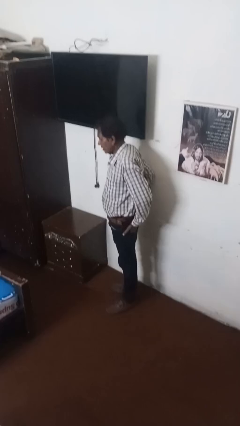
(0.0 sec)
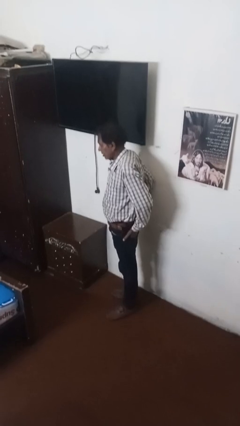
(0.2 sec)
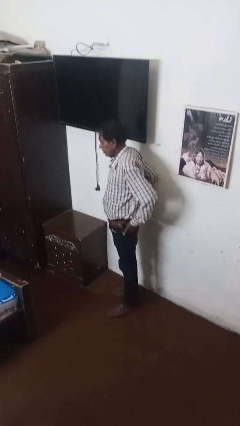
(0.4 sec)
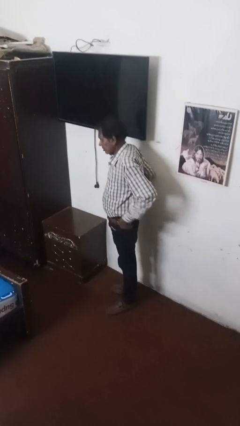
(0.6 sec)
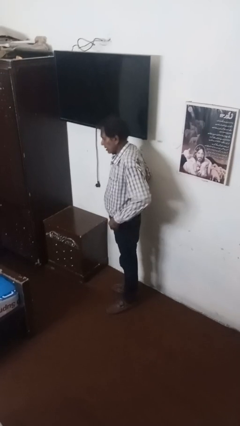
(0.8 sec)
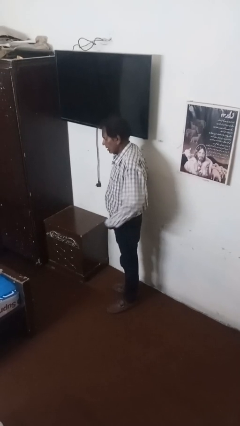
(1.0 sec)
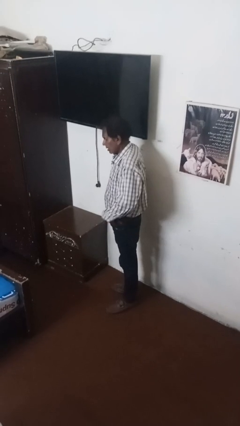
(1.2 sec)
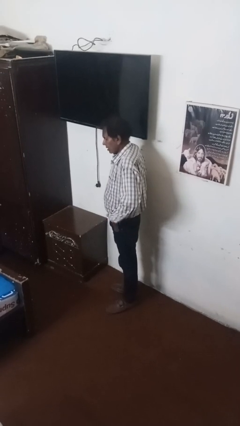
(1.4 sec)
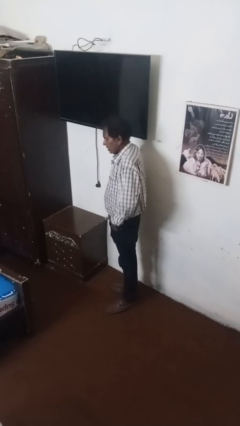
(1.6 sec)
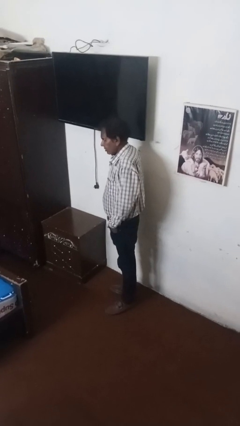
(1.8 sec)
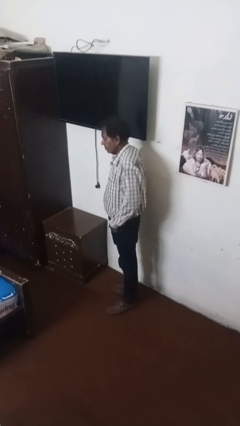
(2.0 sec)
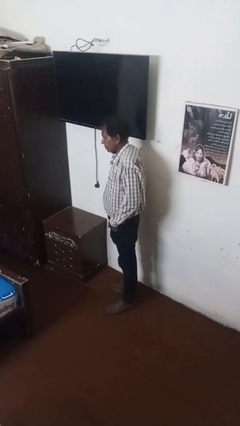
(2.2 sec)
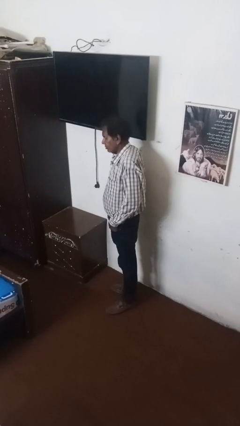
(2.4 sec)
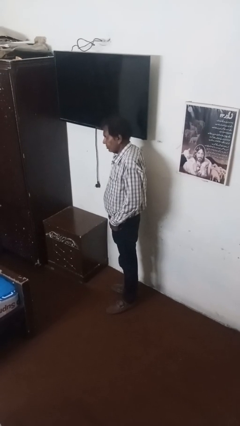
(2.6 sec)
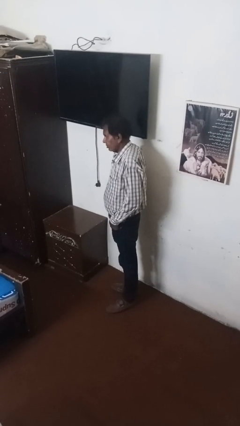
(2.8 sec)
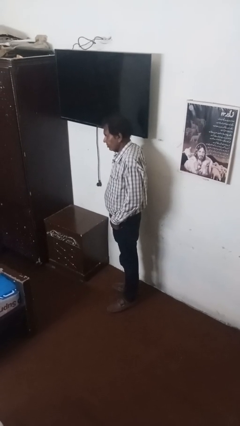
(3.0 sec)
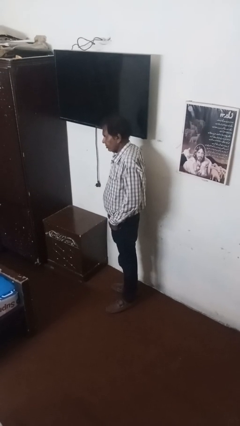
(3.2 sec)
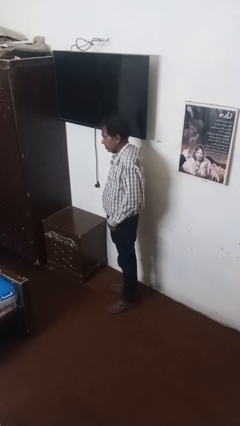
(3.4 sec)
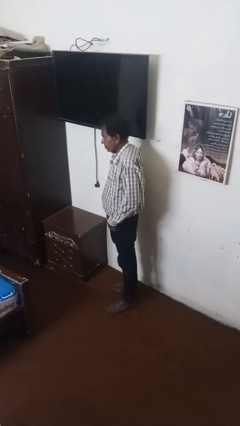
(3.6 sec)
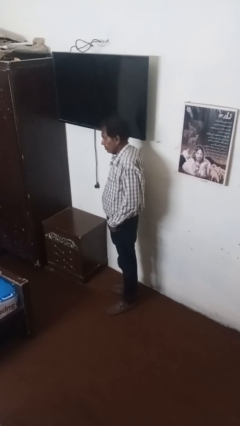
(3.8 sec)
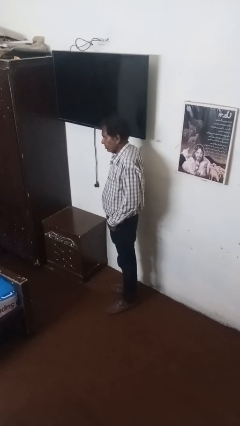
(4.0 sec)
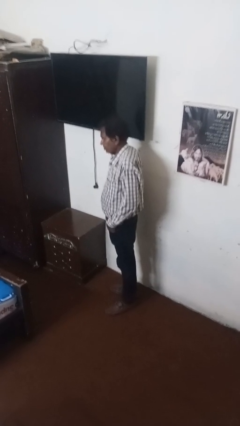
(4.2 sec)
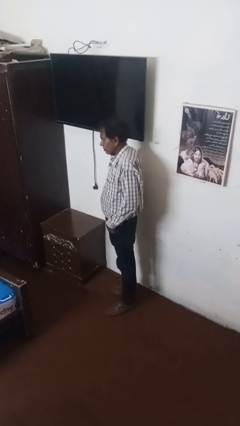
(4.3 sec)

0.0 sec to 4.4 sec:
person puts hands in back pockets

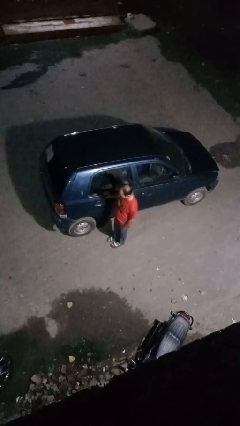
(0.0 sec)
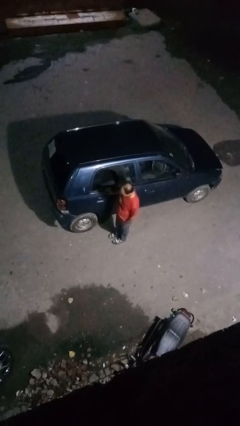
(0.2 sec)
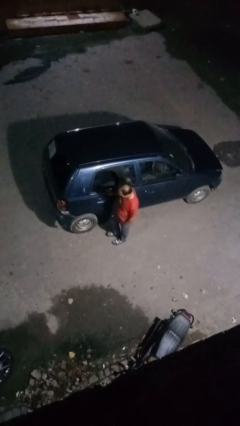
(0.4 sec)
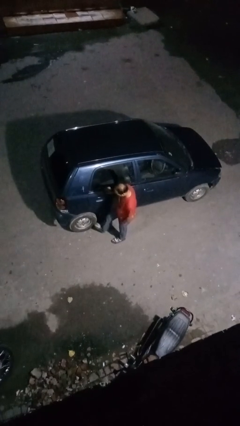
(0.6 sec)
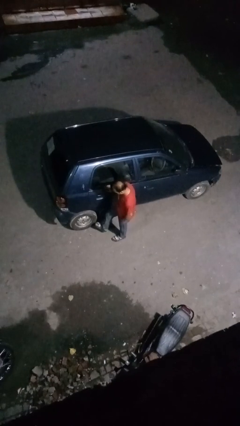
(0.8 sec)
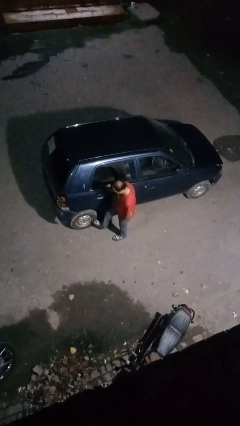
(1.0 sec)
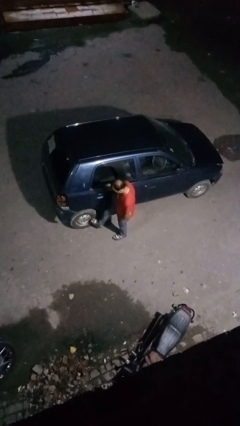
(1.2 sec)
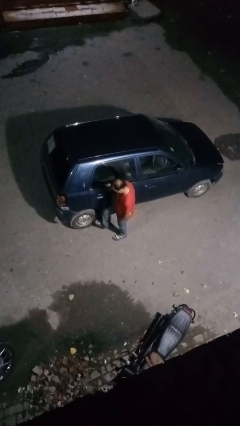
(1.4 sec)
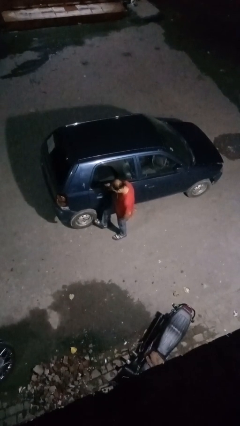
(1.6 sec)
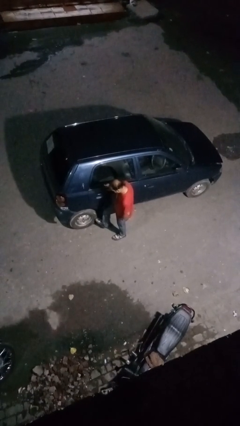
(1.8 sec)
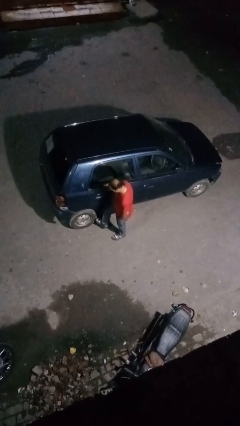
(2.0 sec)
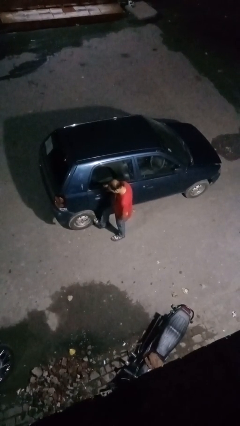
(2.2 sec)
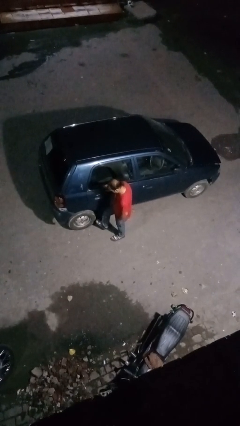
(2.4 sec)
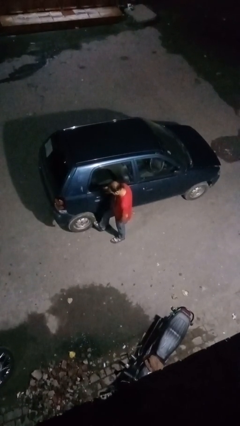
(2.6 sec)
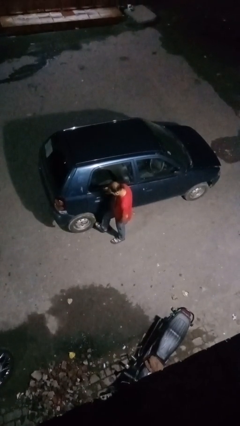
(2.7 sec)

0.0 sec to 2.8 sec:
person kicks car tires

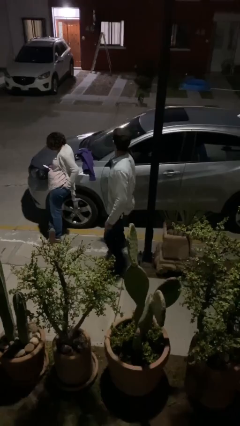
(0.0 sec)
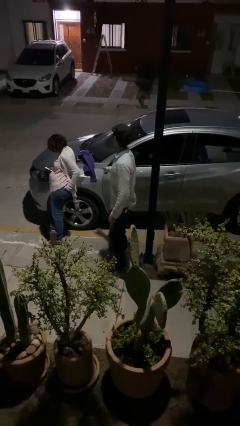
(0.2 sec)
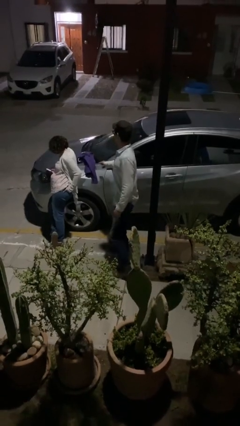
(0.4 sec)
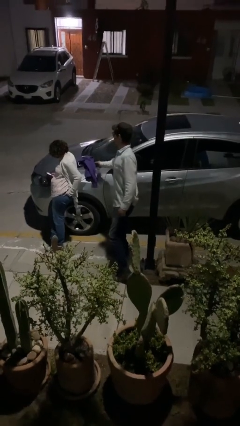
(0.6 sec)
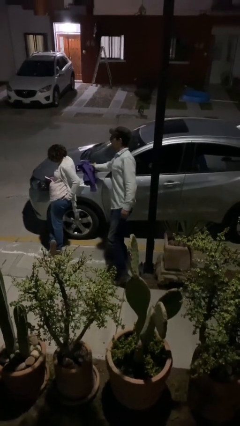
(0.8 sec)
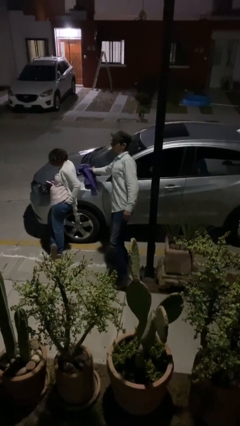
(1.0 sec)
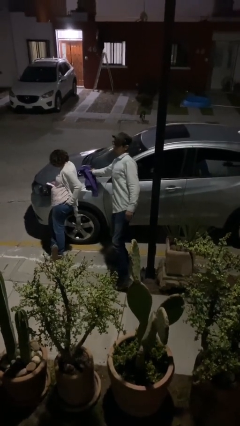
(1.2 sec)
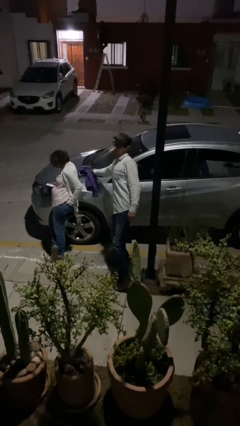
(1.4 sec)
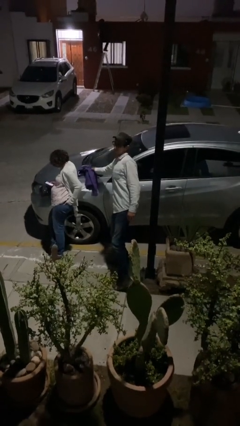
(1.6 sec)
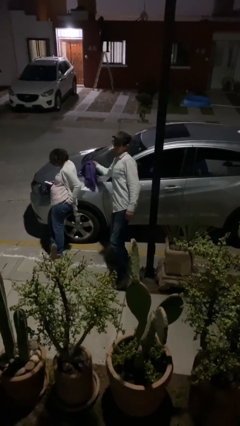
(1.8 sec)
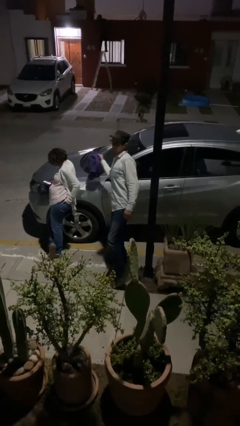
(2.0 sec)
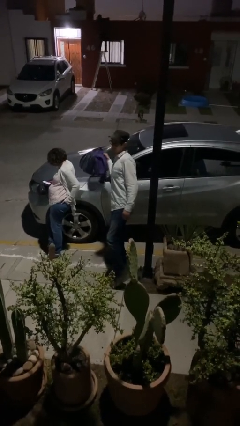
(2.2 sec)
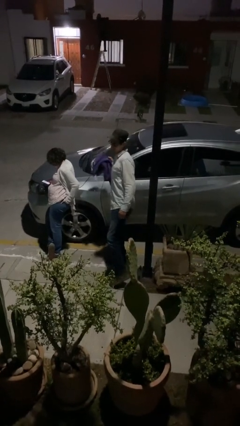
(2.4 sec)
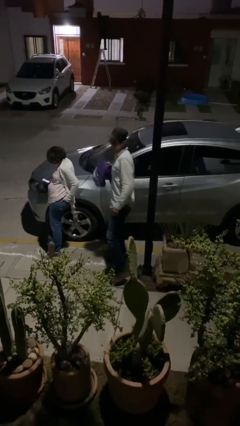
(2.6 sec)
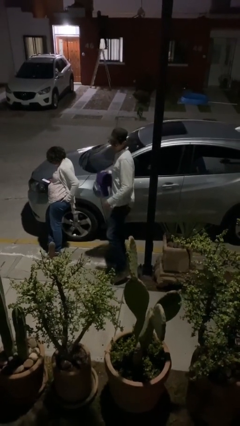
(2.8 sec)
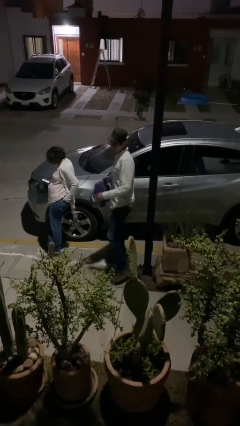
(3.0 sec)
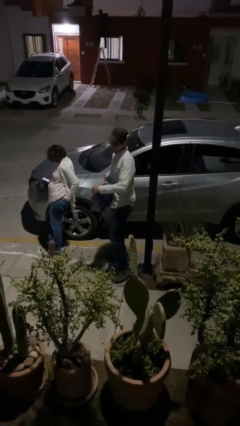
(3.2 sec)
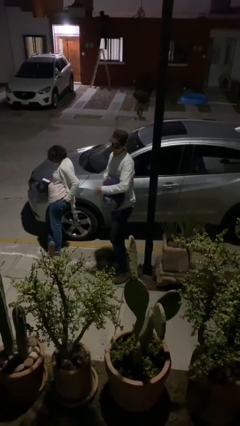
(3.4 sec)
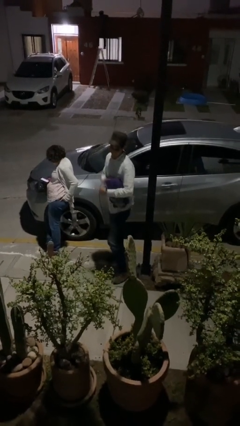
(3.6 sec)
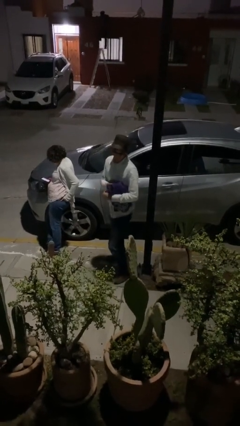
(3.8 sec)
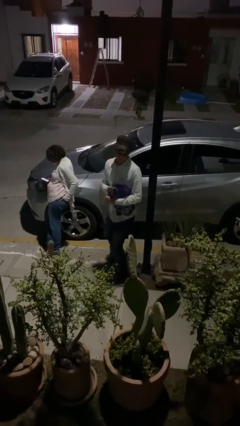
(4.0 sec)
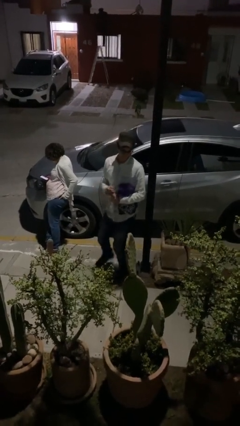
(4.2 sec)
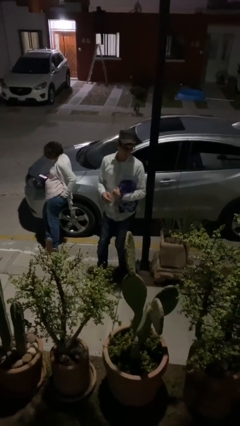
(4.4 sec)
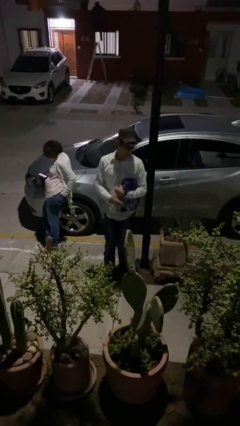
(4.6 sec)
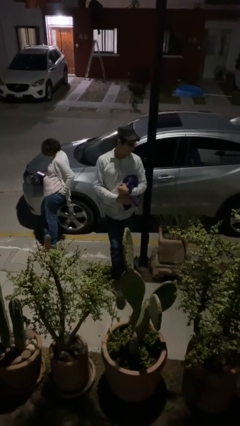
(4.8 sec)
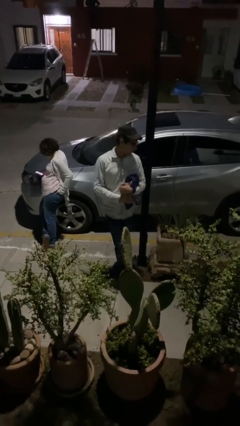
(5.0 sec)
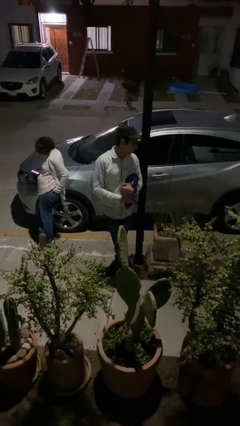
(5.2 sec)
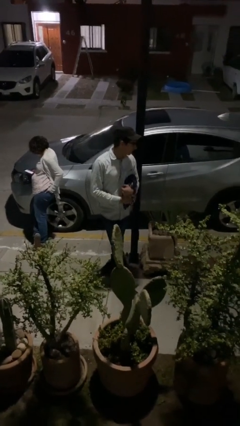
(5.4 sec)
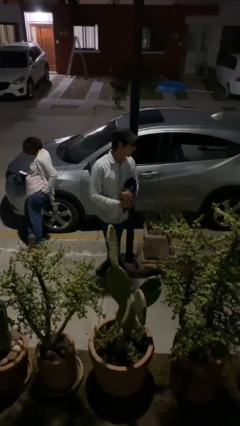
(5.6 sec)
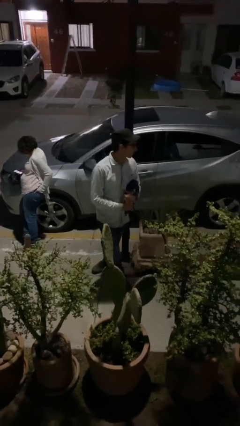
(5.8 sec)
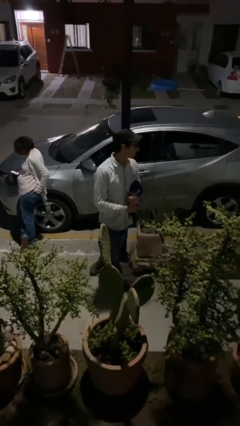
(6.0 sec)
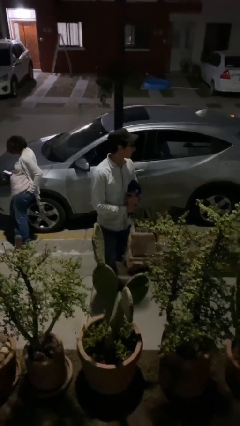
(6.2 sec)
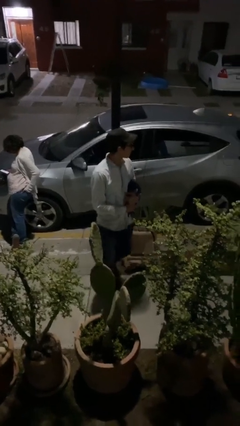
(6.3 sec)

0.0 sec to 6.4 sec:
person steals object from person

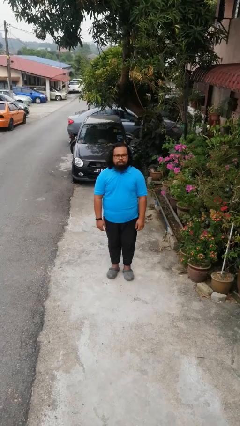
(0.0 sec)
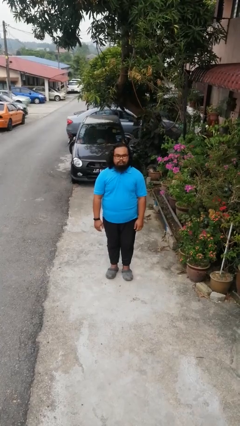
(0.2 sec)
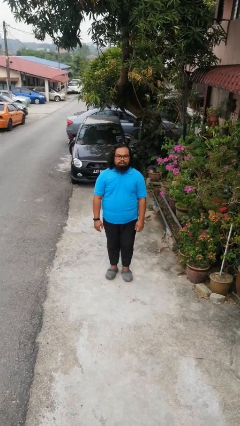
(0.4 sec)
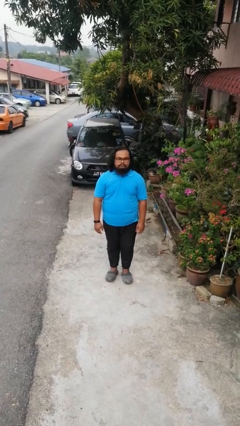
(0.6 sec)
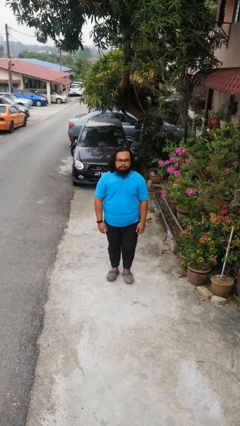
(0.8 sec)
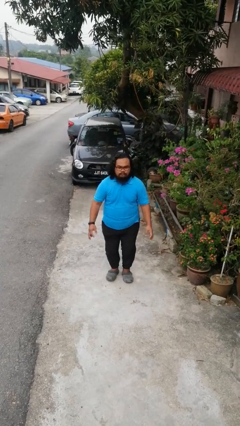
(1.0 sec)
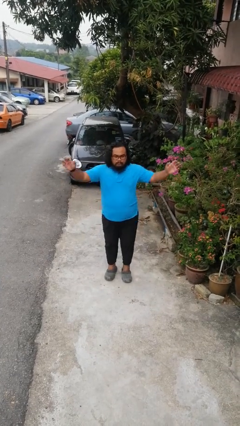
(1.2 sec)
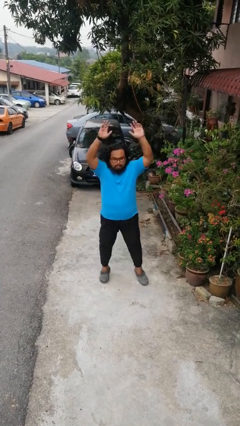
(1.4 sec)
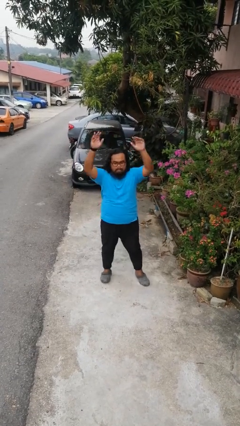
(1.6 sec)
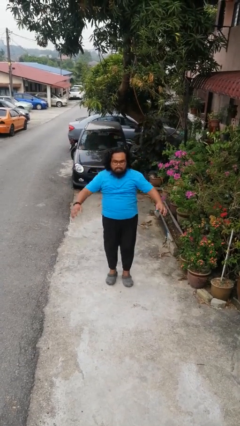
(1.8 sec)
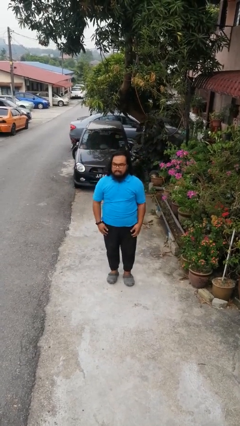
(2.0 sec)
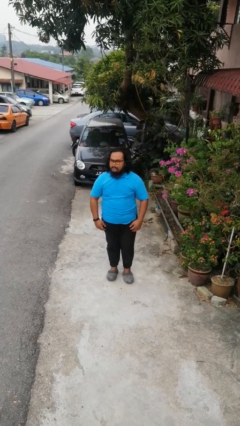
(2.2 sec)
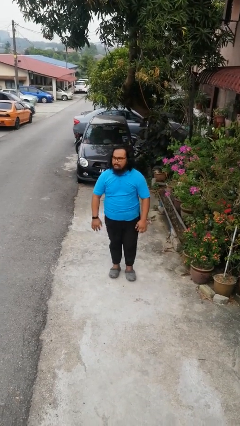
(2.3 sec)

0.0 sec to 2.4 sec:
person exercises with jumping jacks

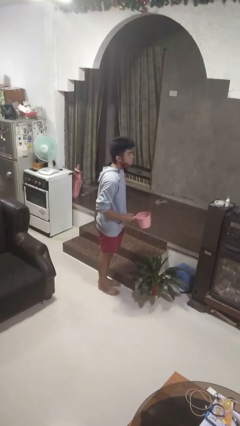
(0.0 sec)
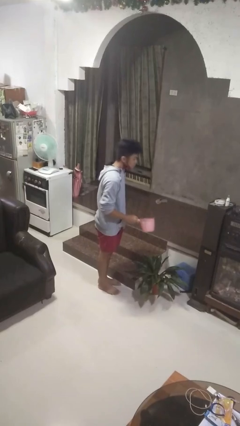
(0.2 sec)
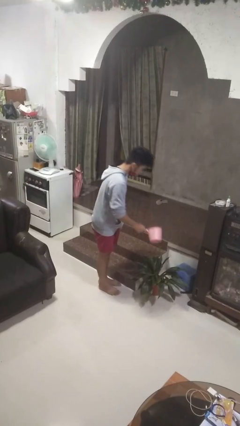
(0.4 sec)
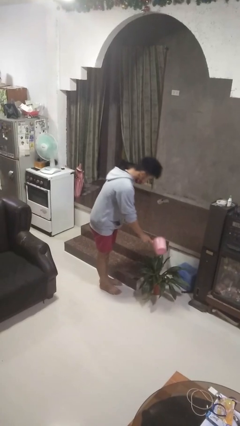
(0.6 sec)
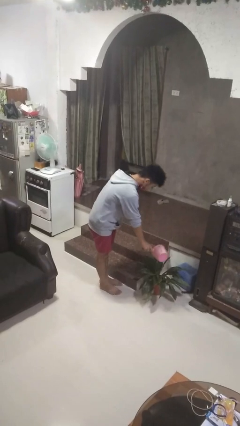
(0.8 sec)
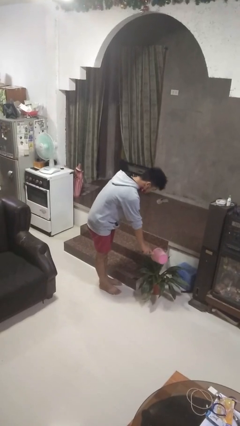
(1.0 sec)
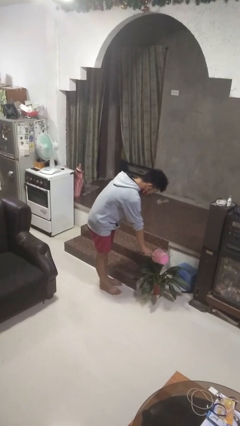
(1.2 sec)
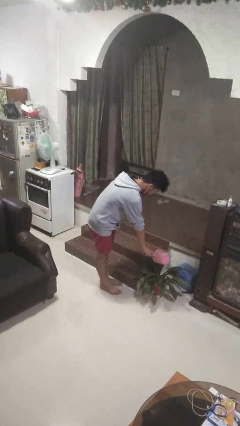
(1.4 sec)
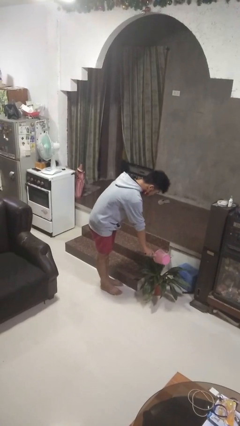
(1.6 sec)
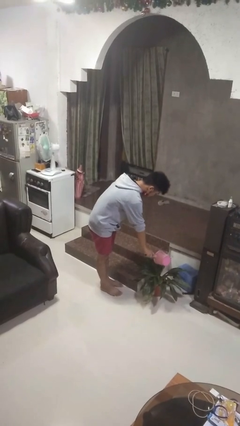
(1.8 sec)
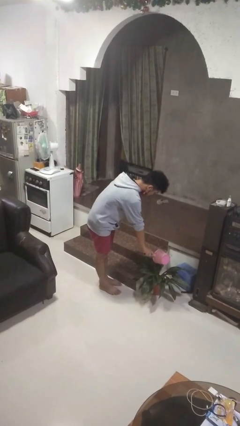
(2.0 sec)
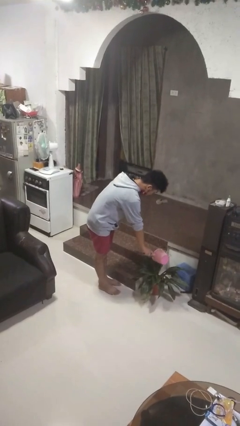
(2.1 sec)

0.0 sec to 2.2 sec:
person waters houseplant
